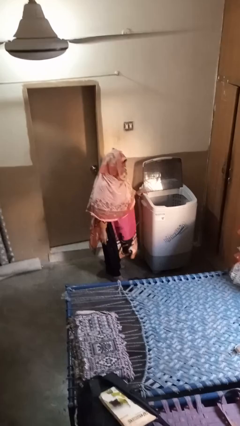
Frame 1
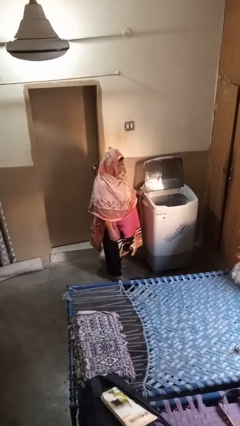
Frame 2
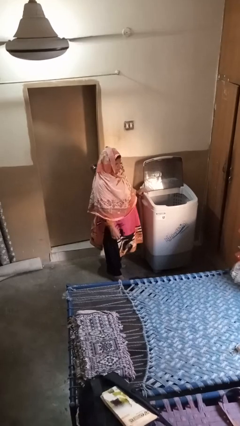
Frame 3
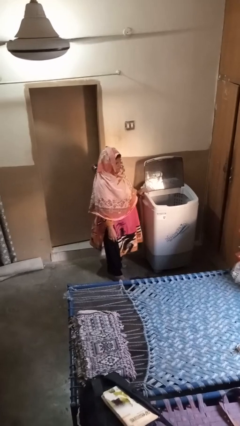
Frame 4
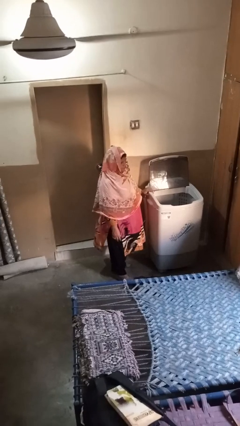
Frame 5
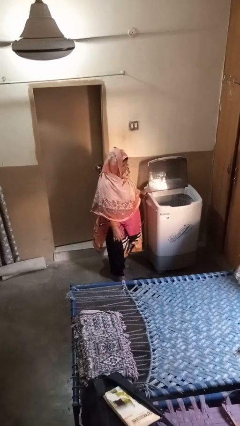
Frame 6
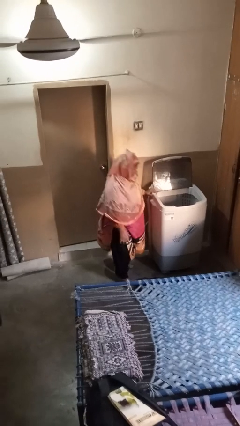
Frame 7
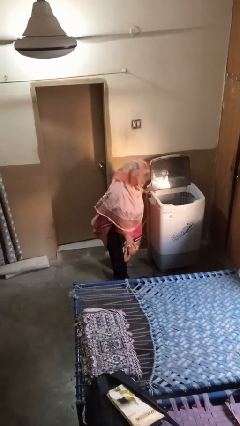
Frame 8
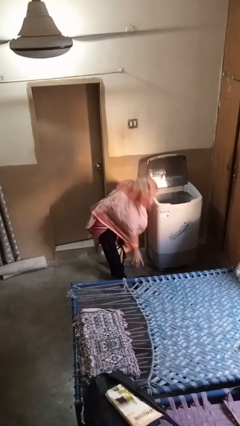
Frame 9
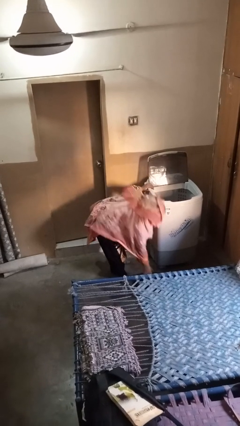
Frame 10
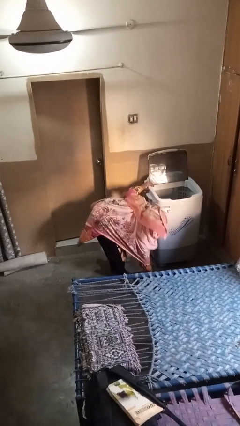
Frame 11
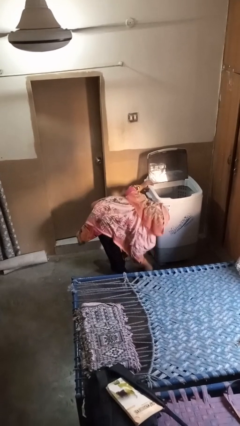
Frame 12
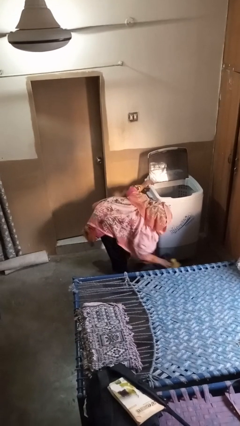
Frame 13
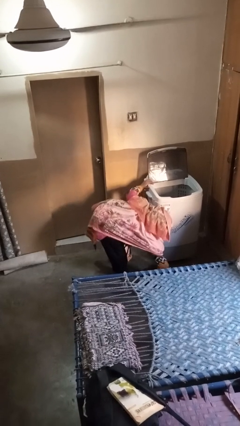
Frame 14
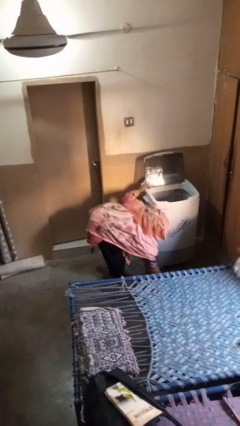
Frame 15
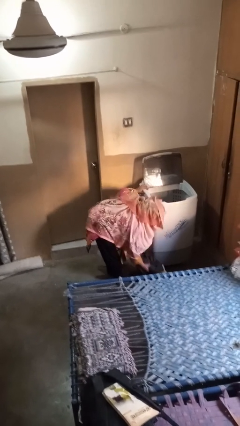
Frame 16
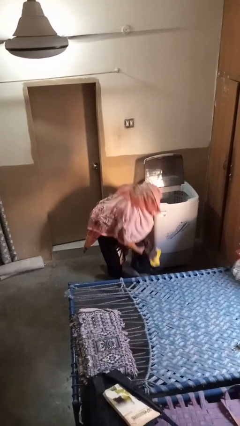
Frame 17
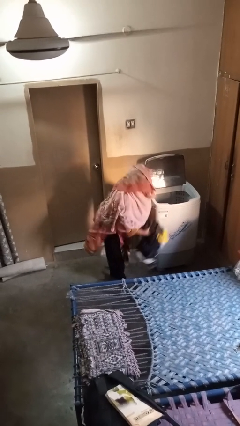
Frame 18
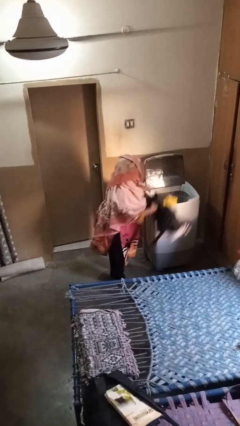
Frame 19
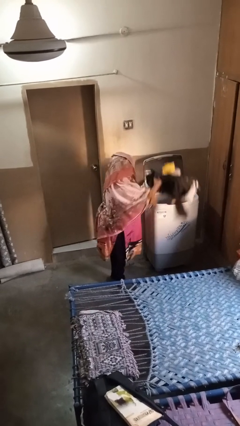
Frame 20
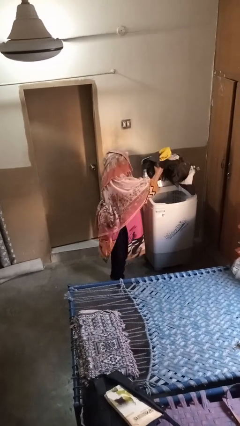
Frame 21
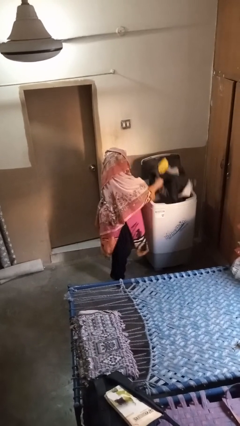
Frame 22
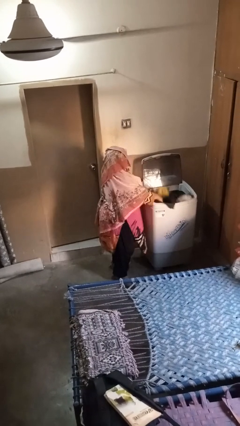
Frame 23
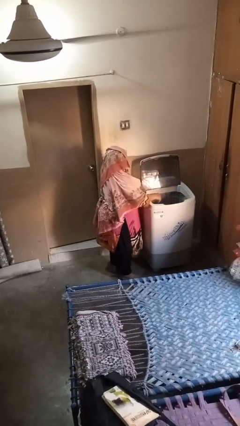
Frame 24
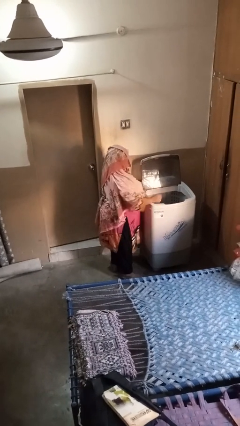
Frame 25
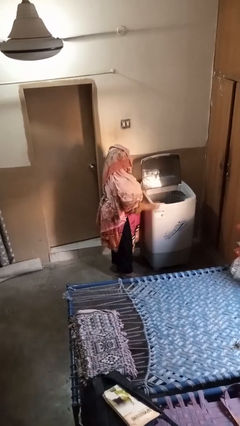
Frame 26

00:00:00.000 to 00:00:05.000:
person loads clotheswasher

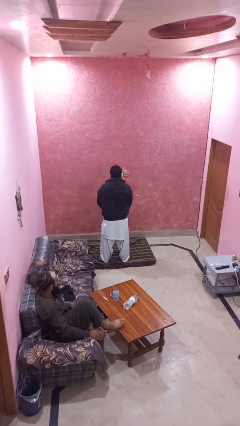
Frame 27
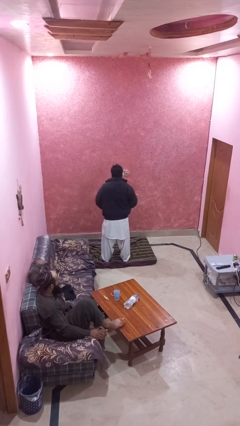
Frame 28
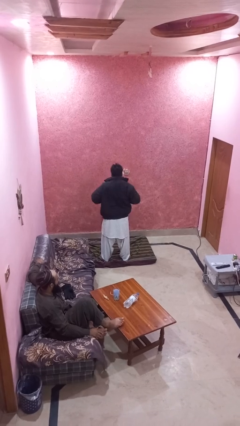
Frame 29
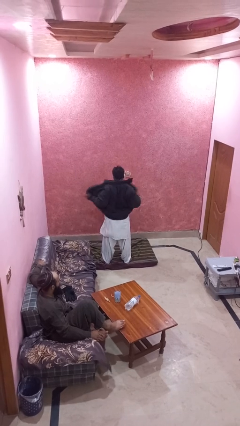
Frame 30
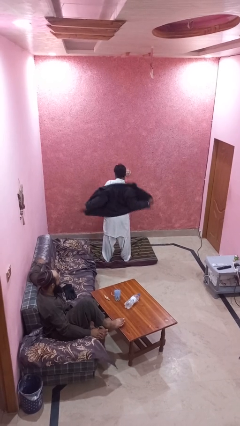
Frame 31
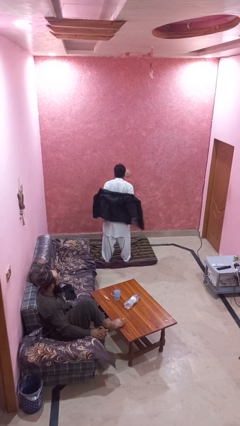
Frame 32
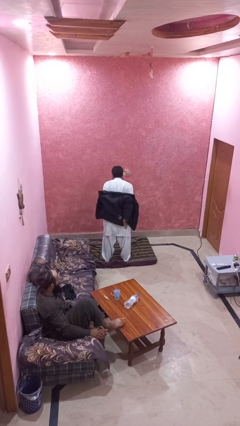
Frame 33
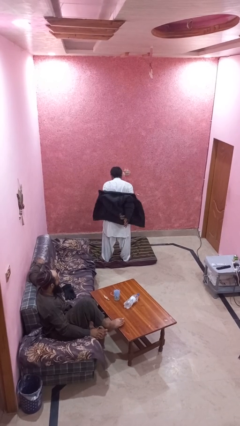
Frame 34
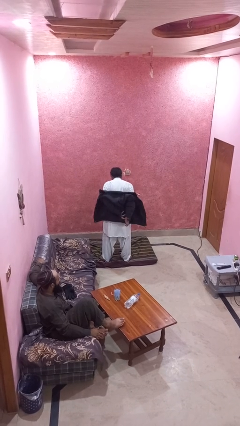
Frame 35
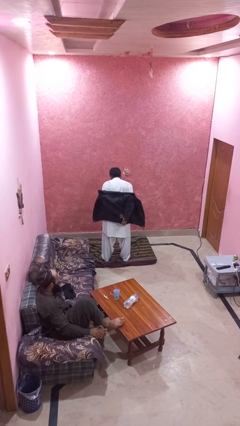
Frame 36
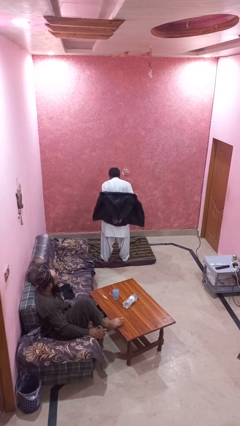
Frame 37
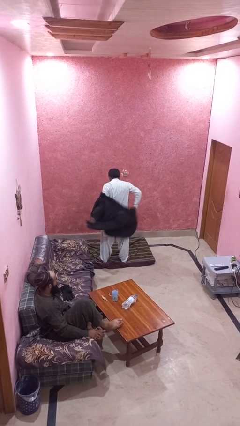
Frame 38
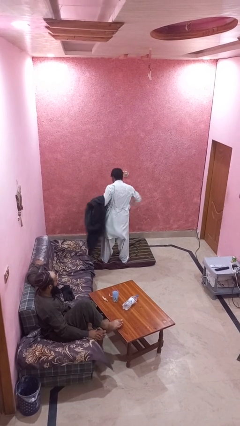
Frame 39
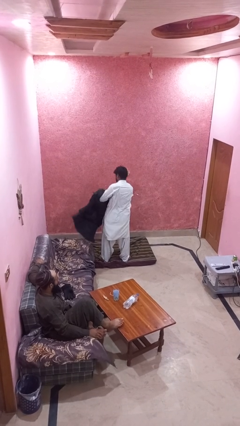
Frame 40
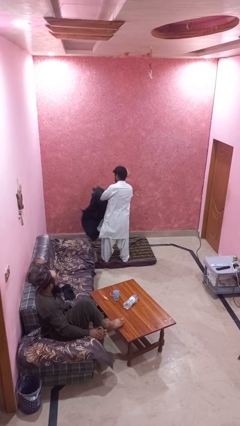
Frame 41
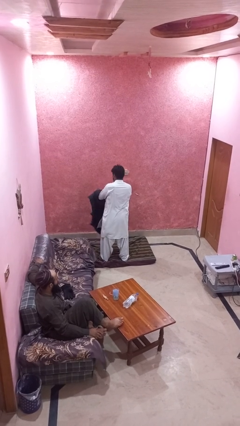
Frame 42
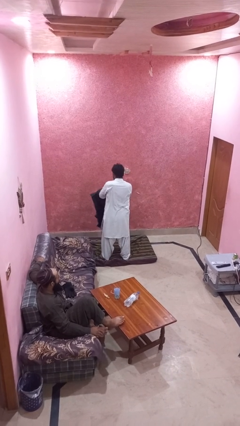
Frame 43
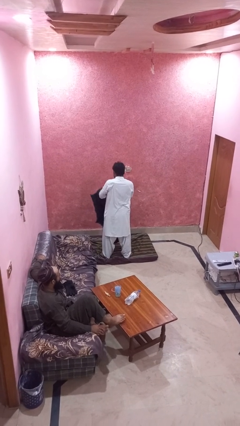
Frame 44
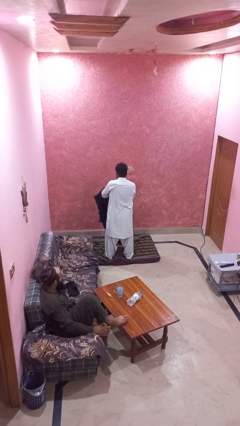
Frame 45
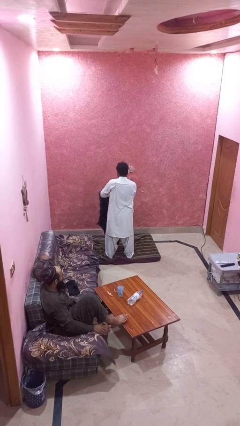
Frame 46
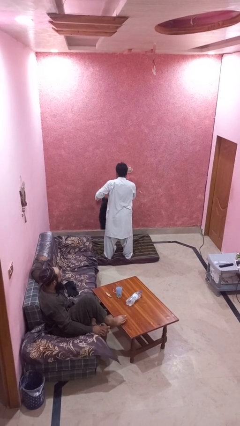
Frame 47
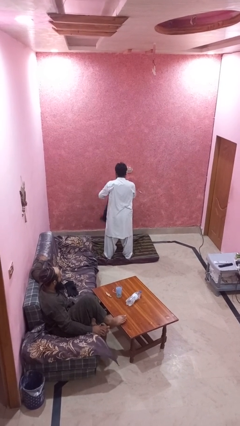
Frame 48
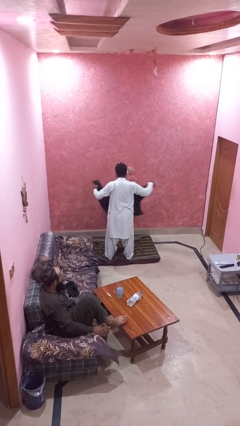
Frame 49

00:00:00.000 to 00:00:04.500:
person takes off jacket

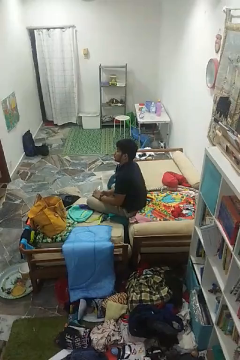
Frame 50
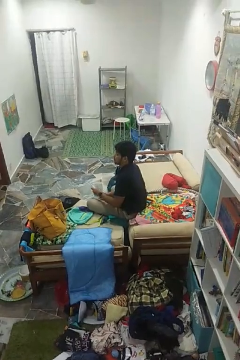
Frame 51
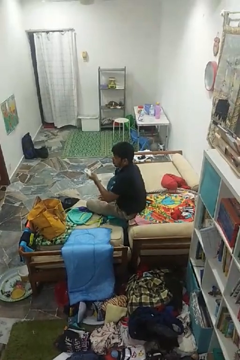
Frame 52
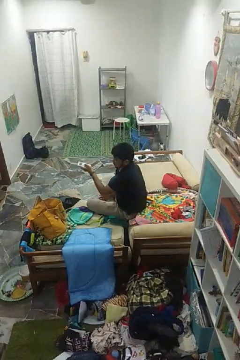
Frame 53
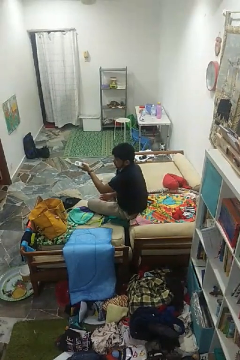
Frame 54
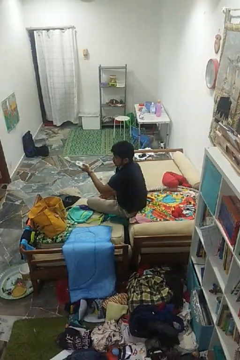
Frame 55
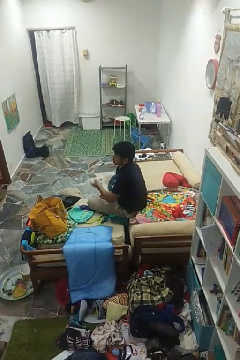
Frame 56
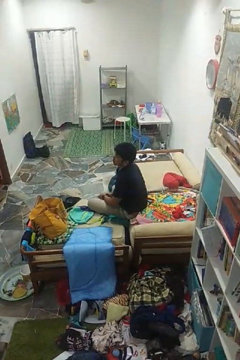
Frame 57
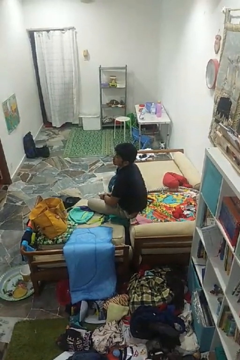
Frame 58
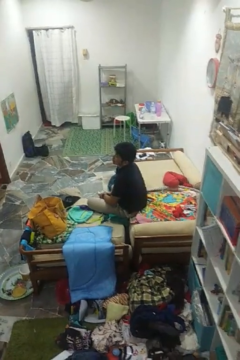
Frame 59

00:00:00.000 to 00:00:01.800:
person uses television remote

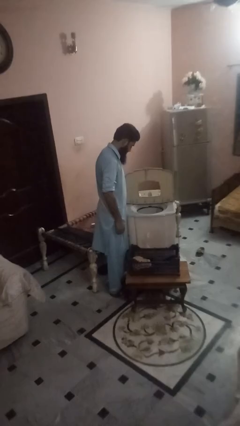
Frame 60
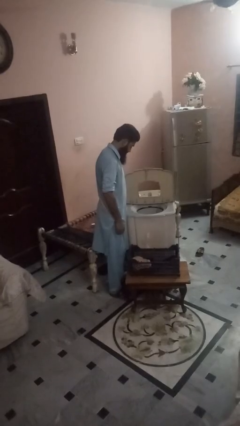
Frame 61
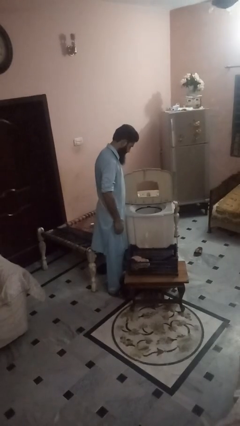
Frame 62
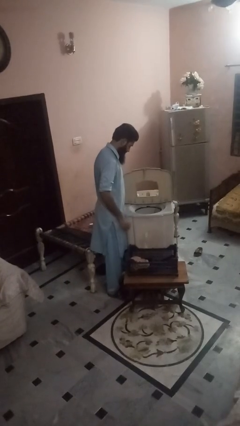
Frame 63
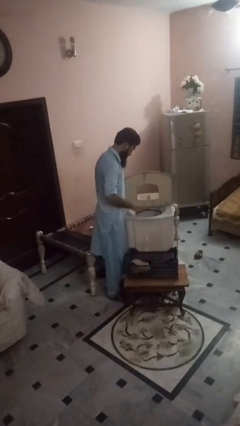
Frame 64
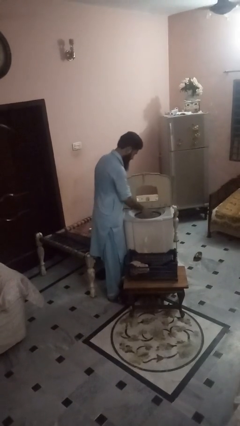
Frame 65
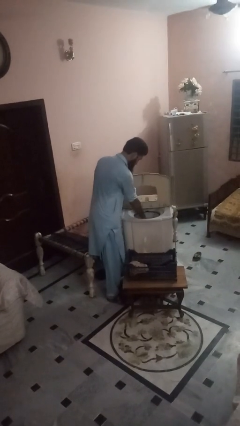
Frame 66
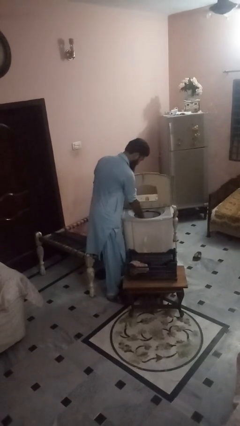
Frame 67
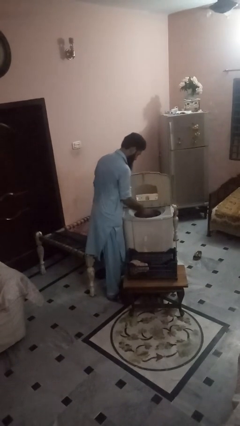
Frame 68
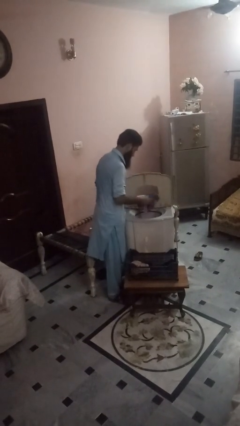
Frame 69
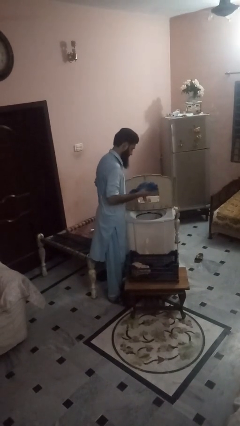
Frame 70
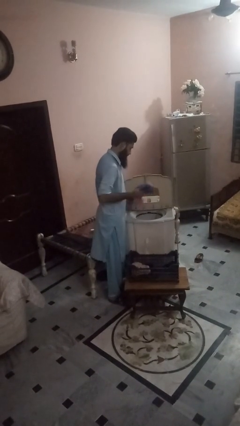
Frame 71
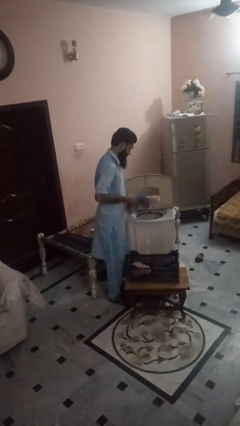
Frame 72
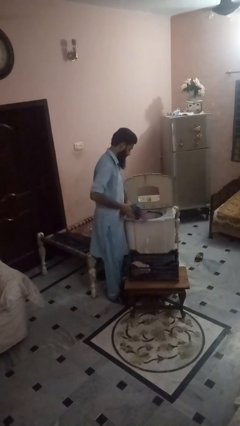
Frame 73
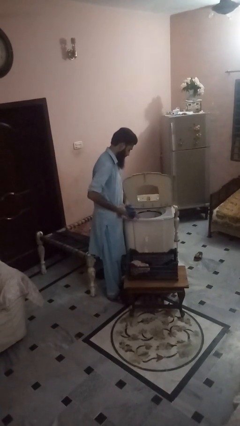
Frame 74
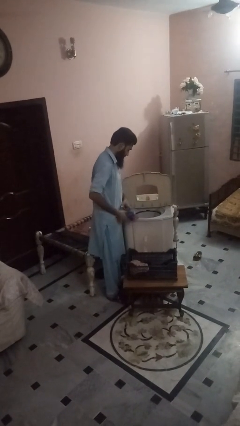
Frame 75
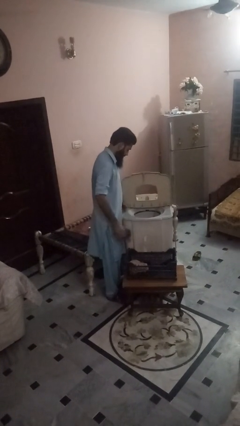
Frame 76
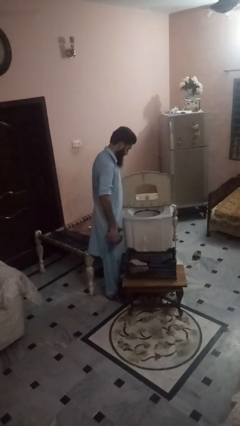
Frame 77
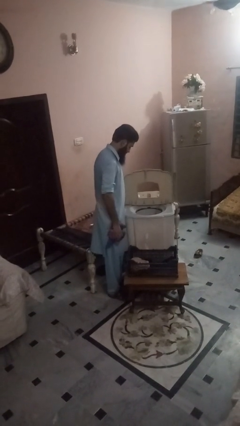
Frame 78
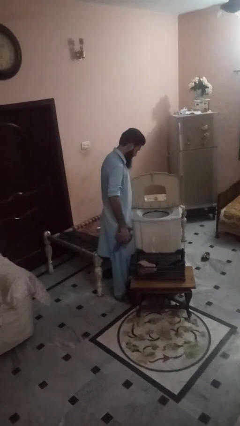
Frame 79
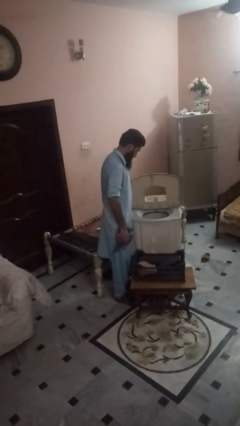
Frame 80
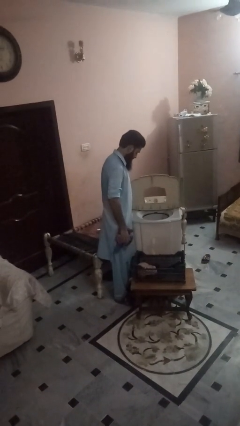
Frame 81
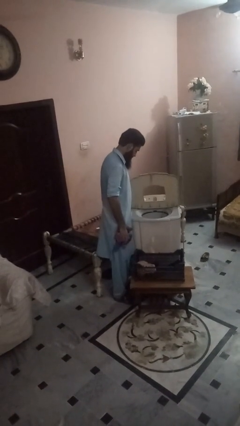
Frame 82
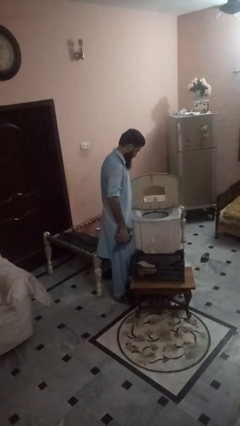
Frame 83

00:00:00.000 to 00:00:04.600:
person unloads dishwasher

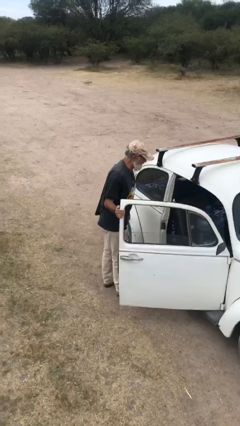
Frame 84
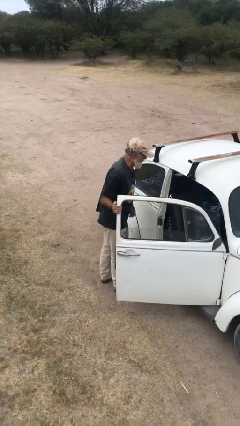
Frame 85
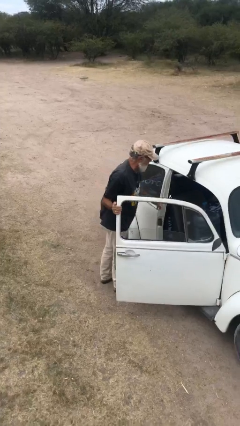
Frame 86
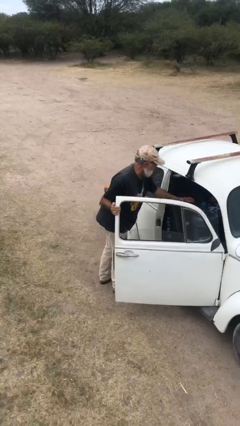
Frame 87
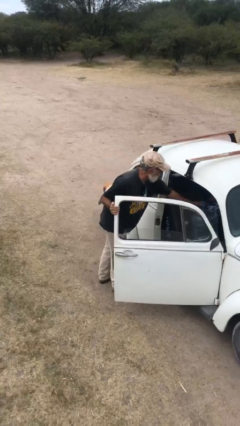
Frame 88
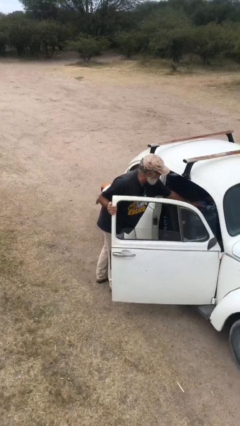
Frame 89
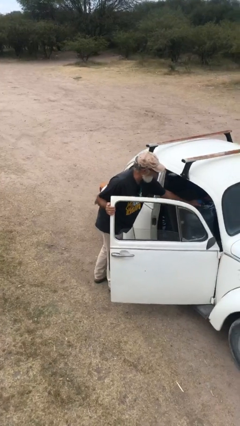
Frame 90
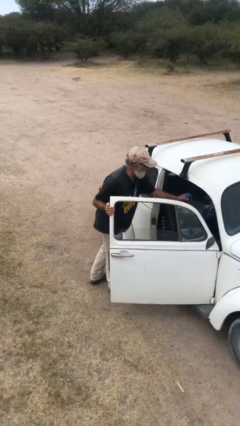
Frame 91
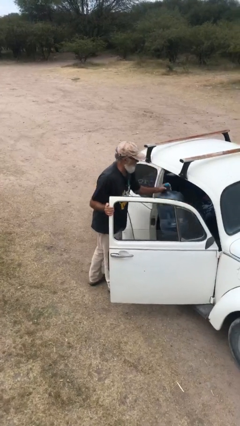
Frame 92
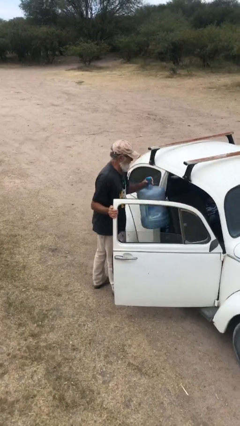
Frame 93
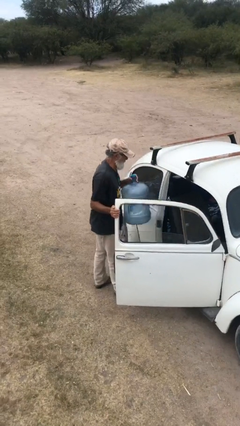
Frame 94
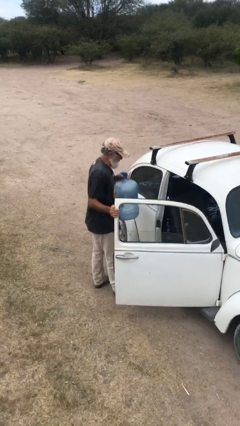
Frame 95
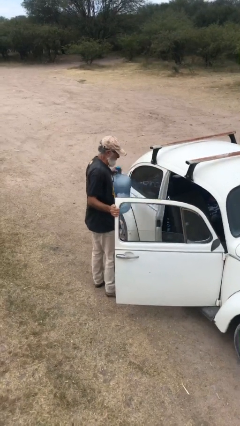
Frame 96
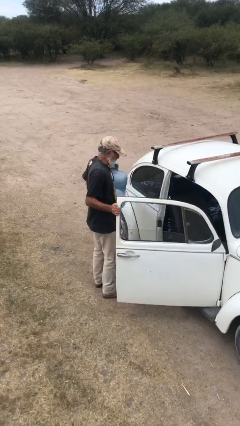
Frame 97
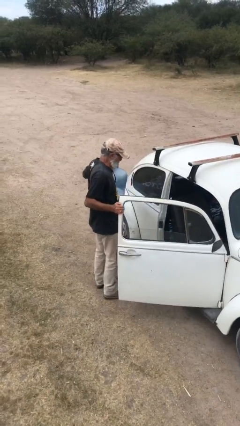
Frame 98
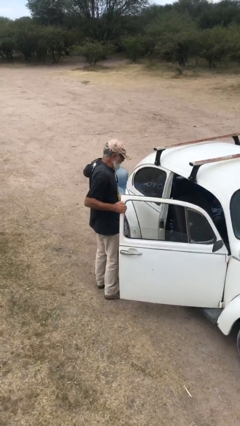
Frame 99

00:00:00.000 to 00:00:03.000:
person unloads car
